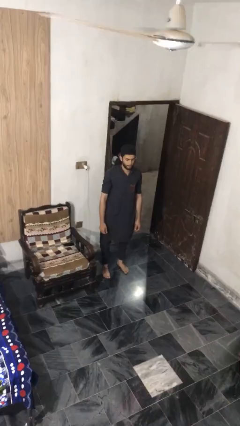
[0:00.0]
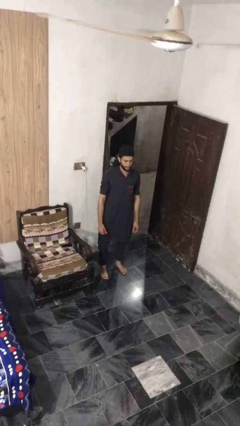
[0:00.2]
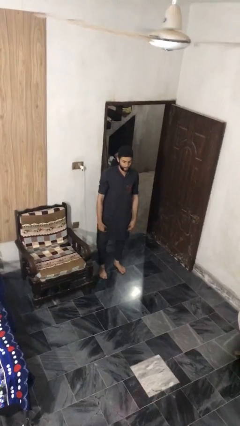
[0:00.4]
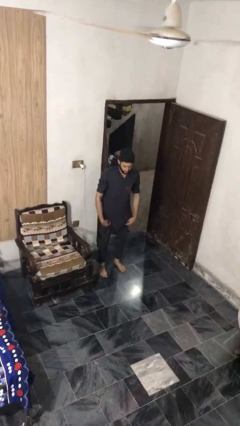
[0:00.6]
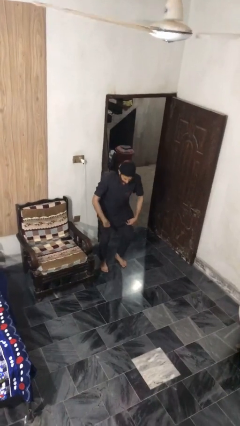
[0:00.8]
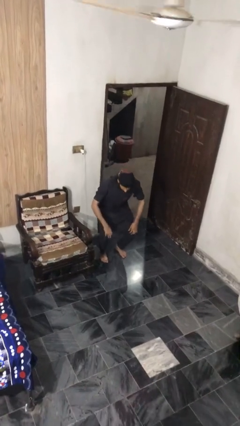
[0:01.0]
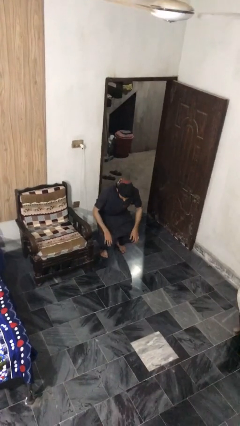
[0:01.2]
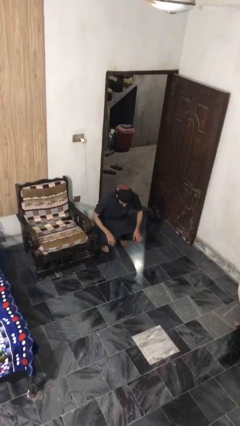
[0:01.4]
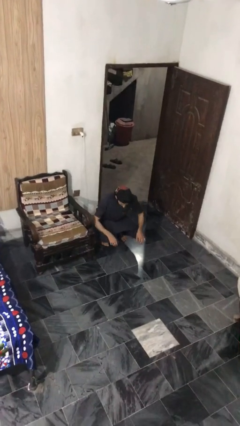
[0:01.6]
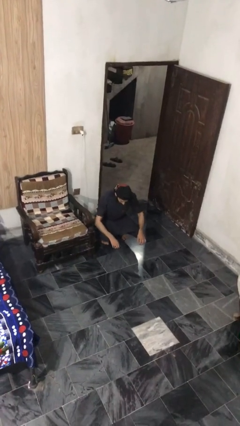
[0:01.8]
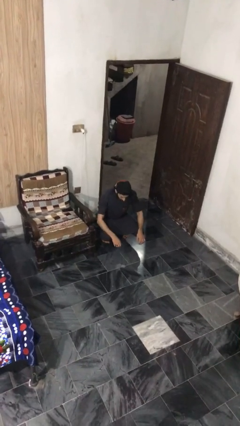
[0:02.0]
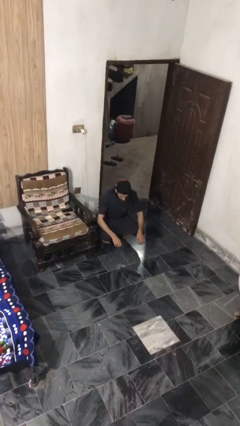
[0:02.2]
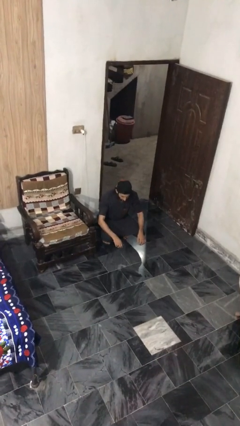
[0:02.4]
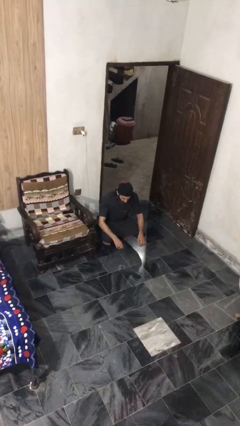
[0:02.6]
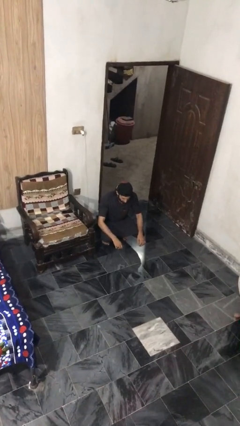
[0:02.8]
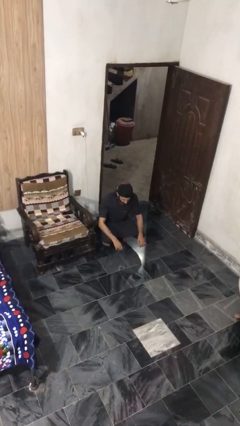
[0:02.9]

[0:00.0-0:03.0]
person squats

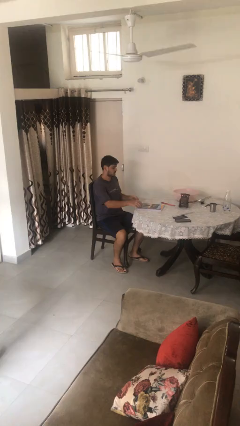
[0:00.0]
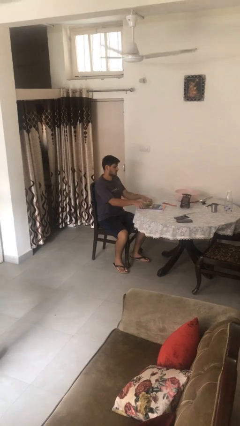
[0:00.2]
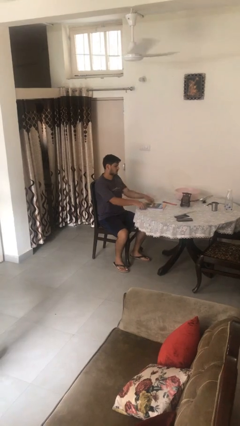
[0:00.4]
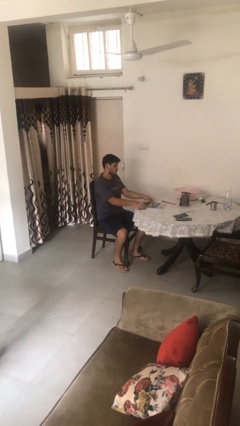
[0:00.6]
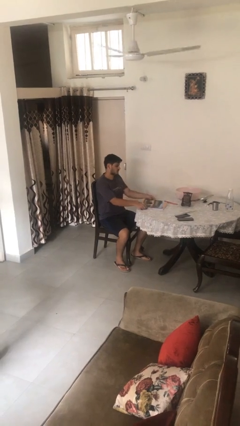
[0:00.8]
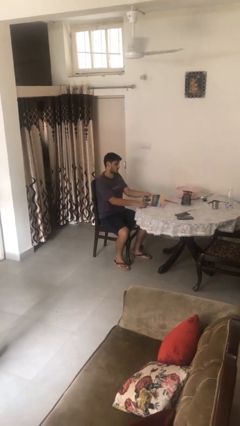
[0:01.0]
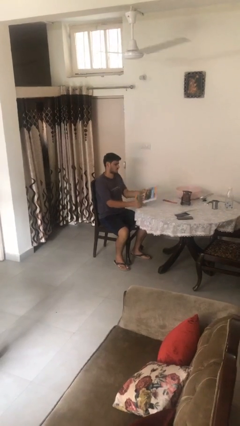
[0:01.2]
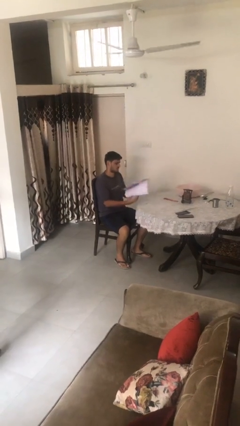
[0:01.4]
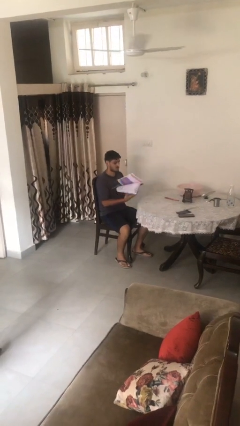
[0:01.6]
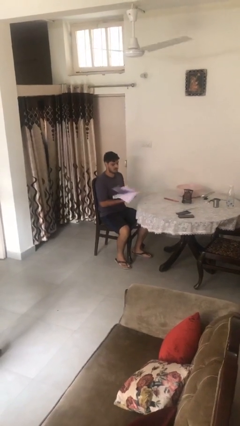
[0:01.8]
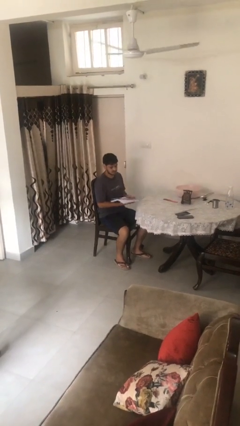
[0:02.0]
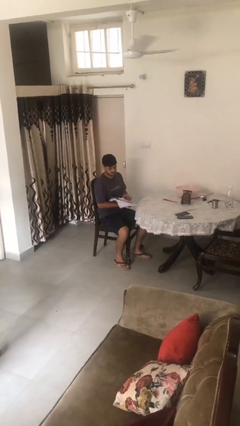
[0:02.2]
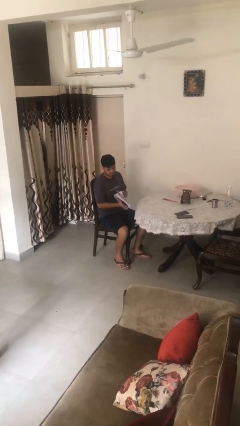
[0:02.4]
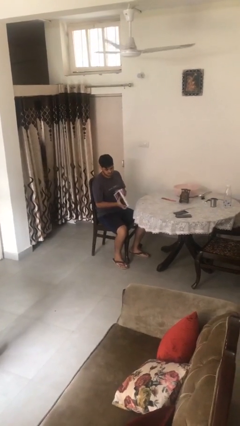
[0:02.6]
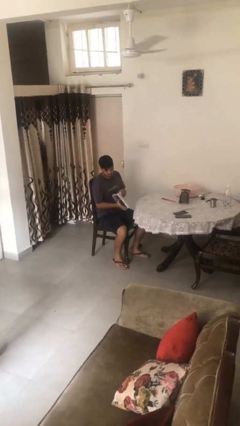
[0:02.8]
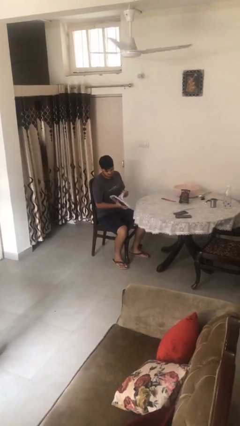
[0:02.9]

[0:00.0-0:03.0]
person picks up object from table

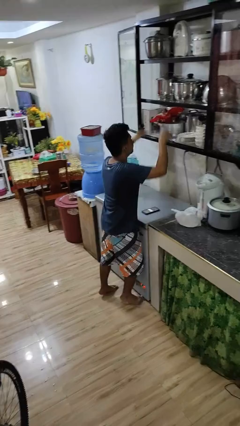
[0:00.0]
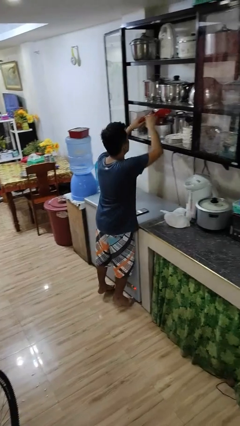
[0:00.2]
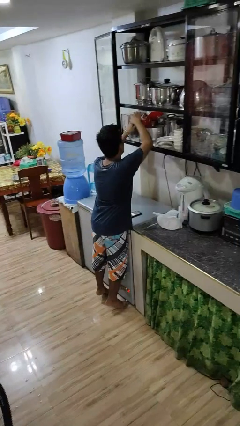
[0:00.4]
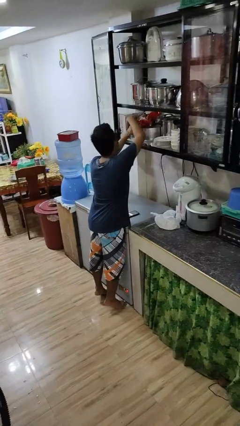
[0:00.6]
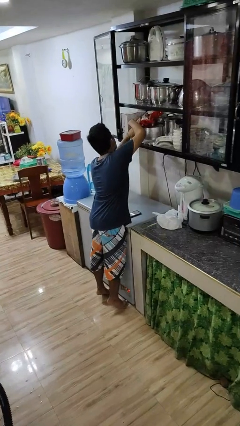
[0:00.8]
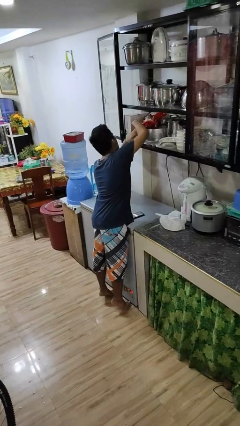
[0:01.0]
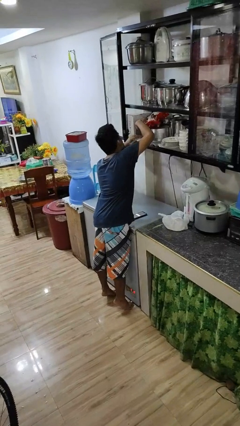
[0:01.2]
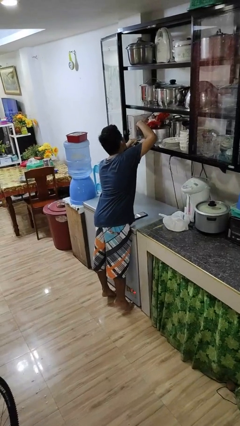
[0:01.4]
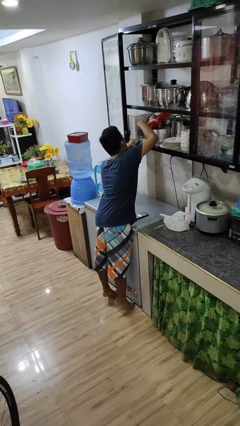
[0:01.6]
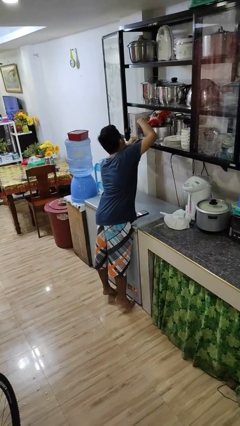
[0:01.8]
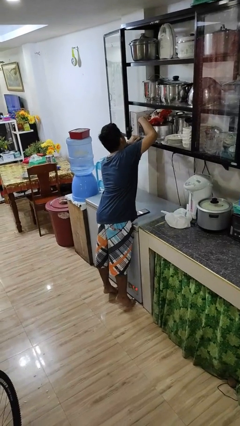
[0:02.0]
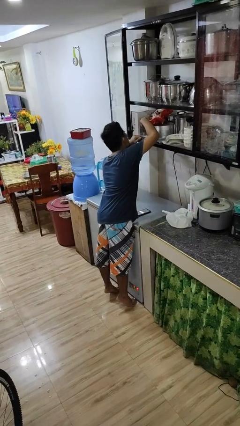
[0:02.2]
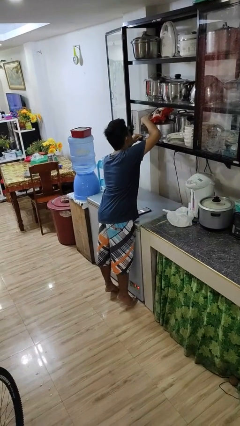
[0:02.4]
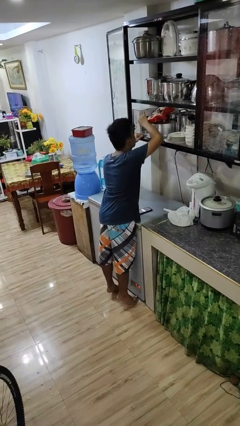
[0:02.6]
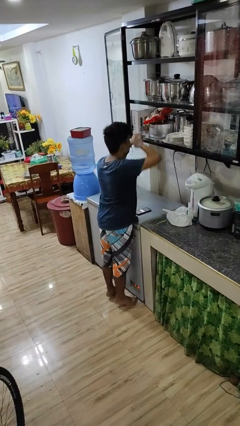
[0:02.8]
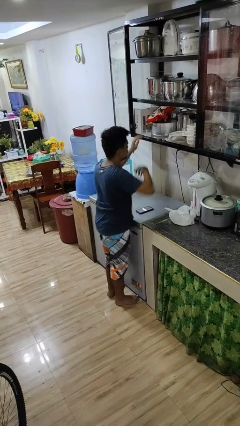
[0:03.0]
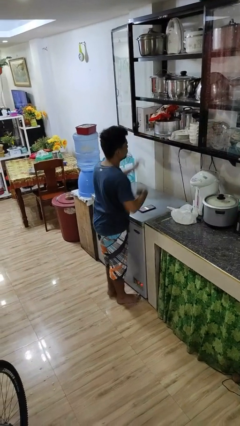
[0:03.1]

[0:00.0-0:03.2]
person searches in cabinet

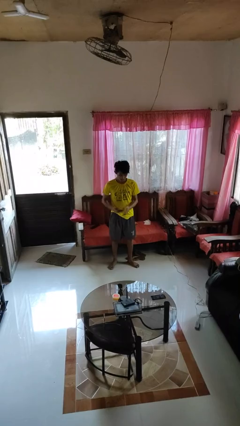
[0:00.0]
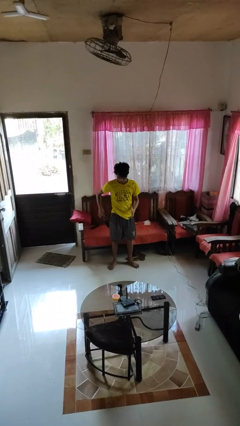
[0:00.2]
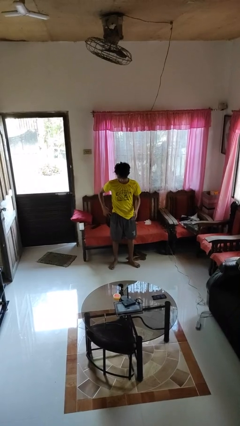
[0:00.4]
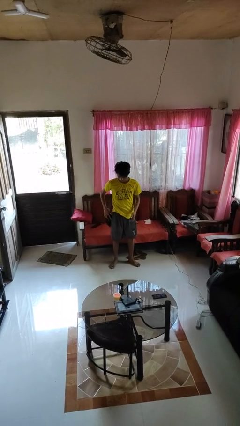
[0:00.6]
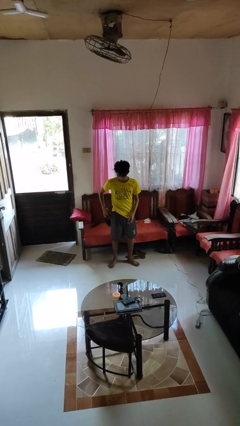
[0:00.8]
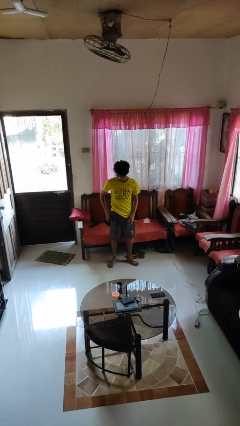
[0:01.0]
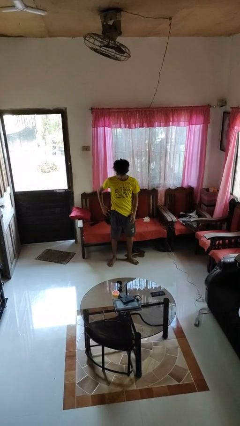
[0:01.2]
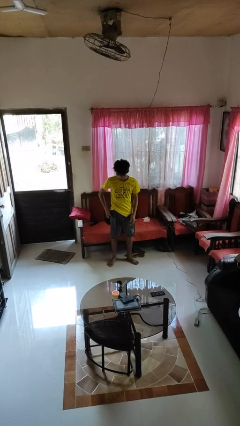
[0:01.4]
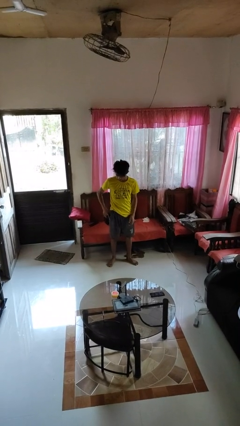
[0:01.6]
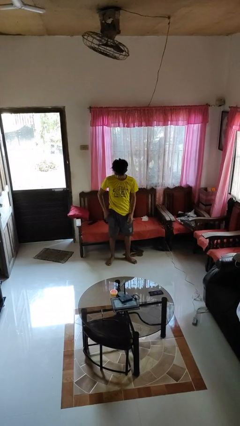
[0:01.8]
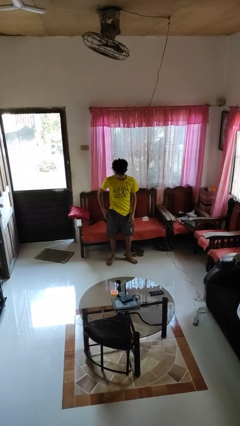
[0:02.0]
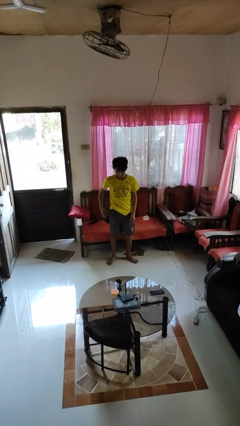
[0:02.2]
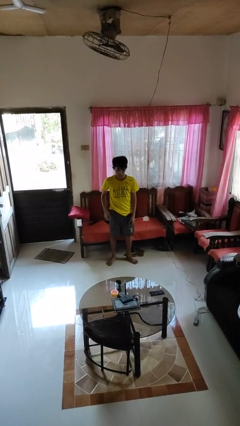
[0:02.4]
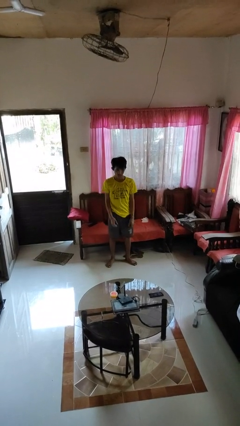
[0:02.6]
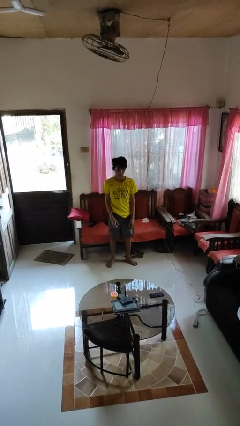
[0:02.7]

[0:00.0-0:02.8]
person puts phone into pocket

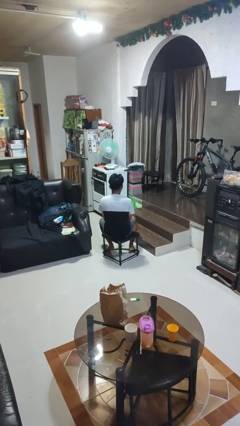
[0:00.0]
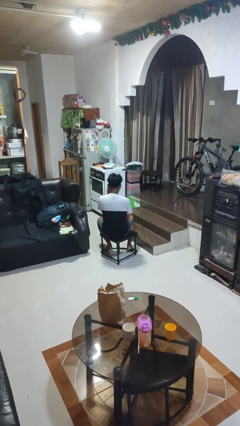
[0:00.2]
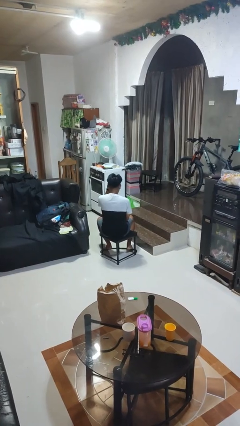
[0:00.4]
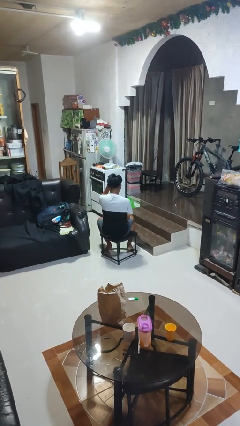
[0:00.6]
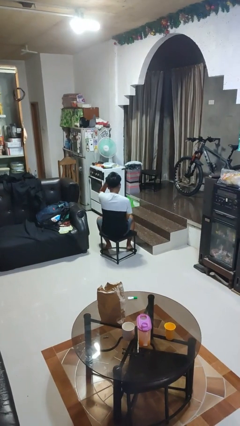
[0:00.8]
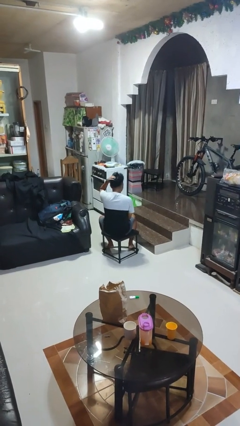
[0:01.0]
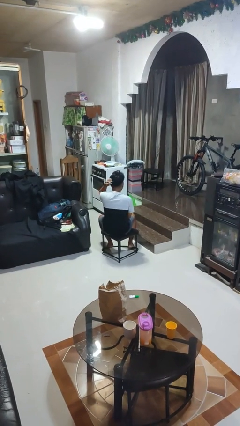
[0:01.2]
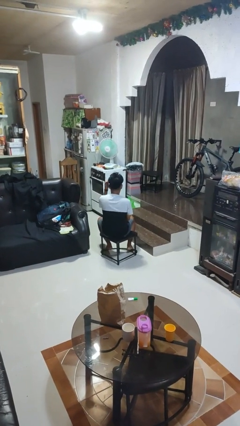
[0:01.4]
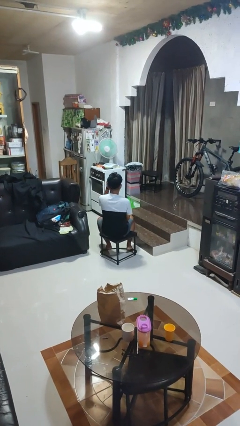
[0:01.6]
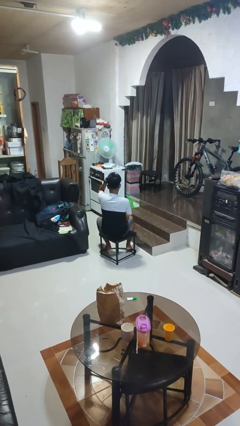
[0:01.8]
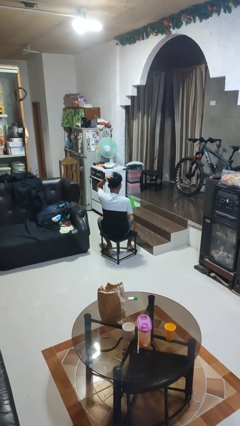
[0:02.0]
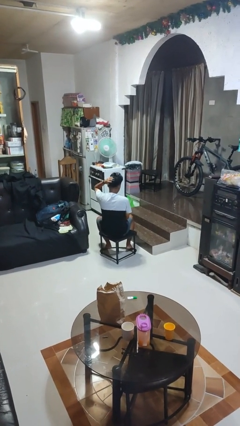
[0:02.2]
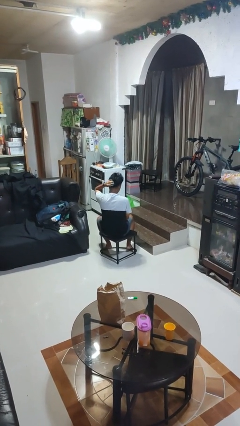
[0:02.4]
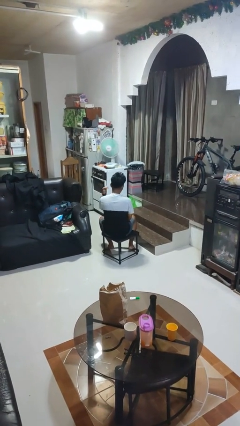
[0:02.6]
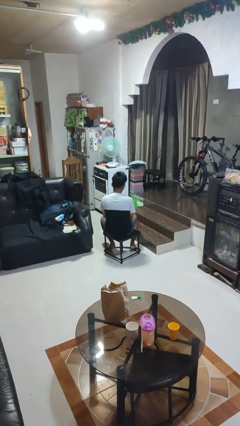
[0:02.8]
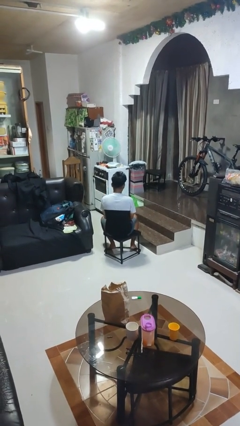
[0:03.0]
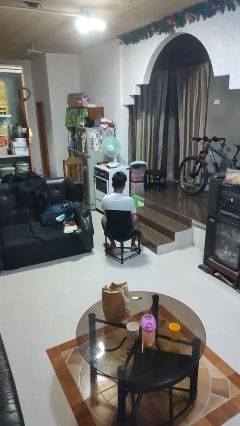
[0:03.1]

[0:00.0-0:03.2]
person strokes hair

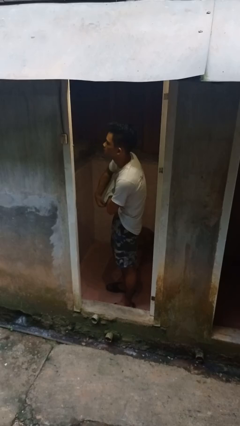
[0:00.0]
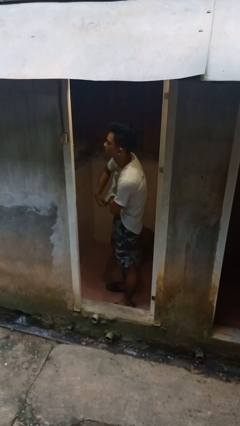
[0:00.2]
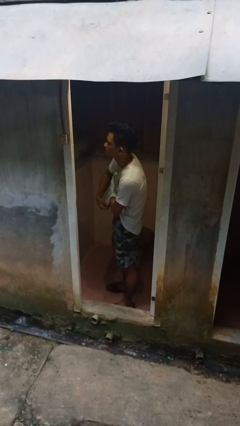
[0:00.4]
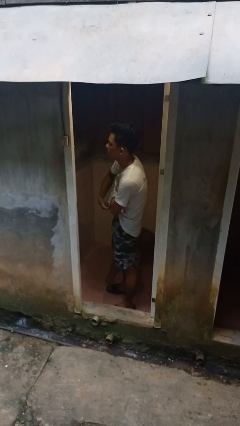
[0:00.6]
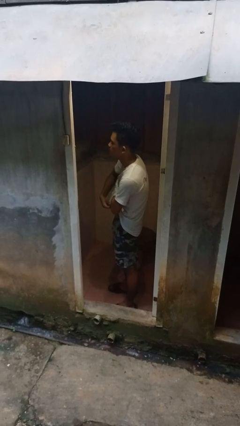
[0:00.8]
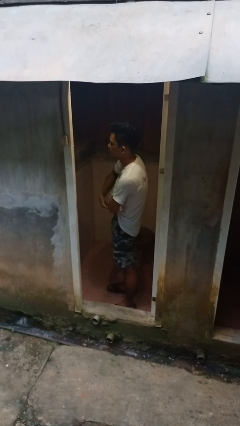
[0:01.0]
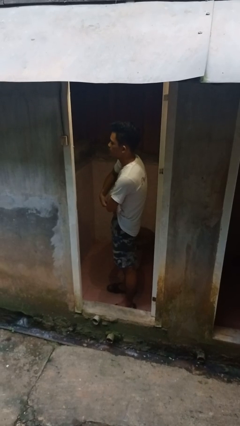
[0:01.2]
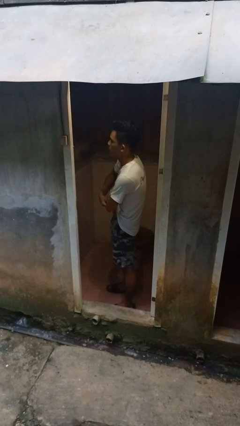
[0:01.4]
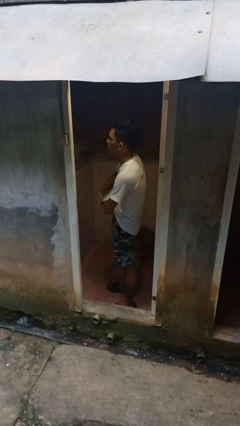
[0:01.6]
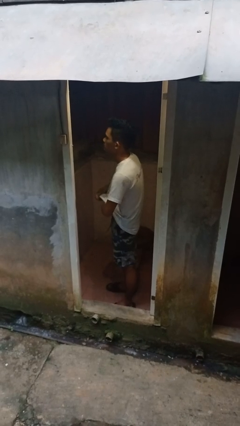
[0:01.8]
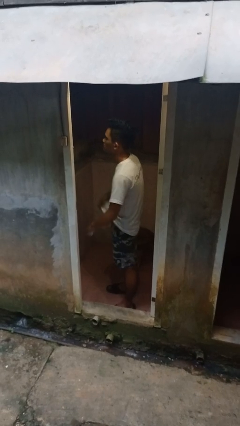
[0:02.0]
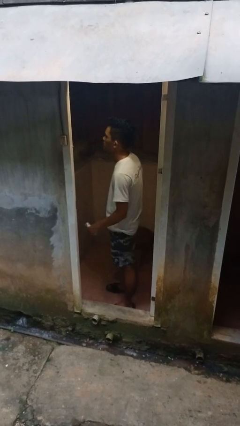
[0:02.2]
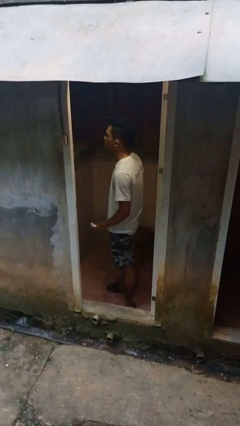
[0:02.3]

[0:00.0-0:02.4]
person applies deodorant
